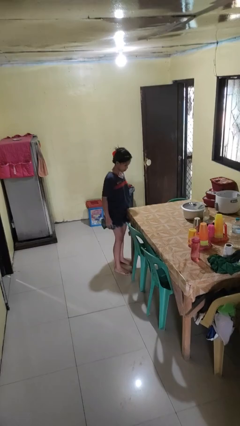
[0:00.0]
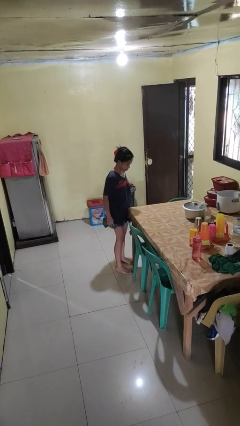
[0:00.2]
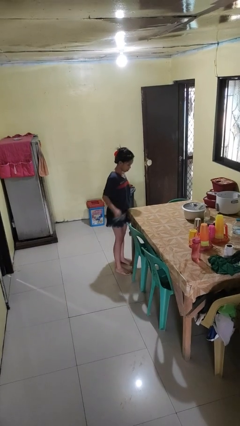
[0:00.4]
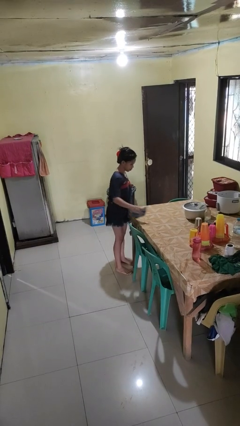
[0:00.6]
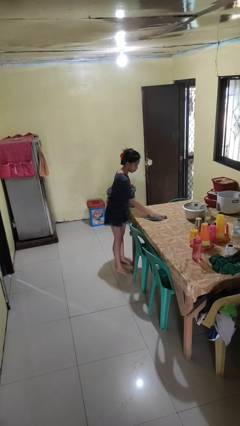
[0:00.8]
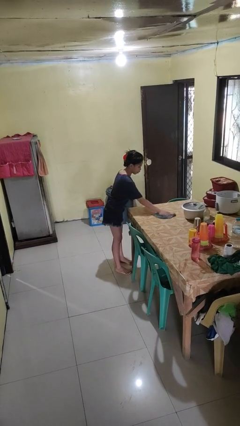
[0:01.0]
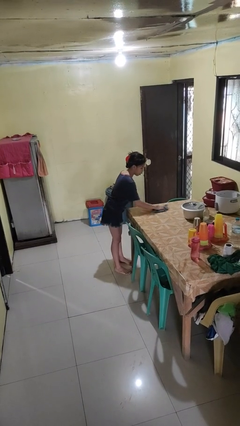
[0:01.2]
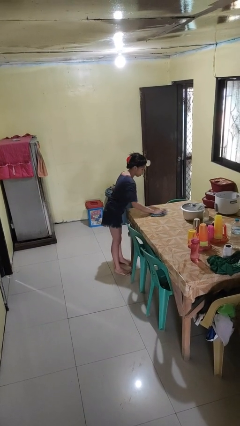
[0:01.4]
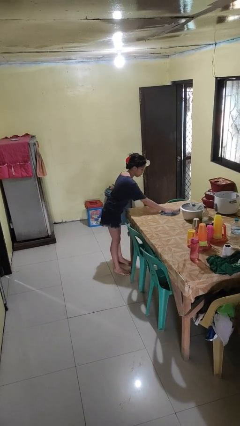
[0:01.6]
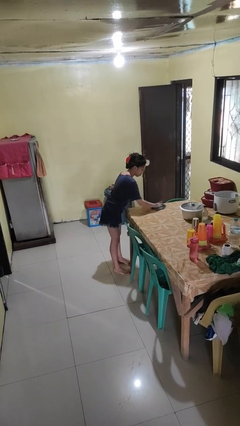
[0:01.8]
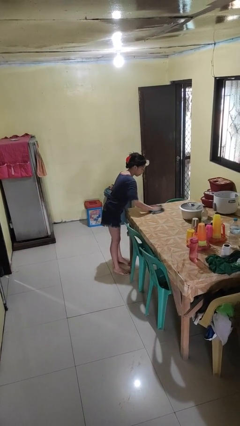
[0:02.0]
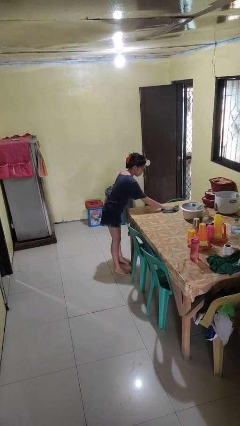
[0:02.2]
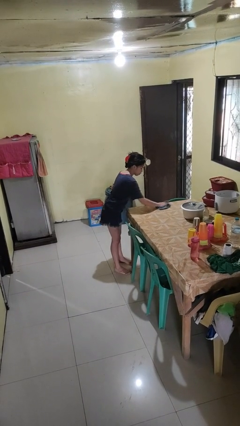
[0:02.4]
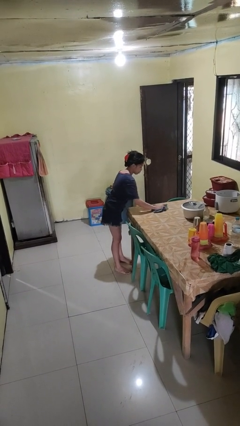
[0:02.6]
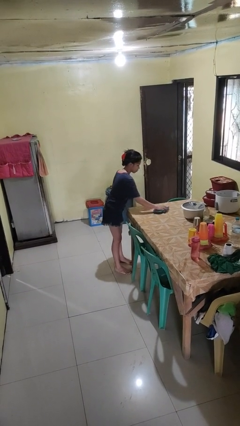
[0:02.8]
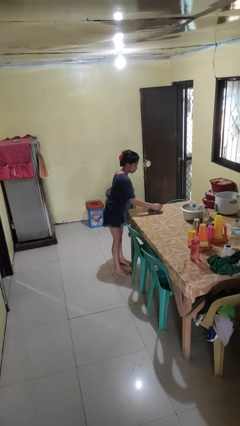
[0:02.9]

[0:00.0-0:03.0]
person cleans table with rag

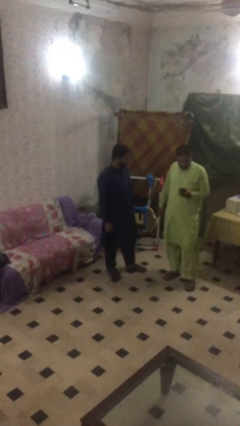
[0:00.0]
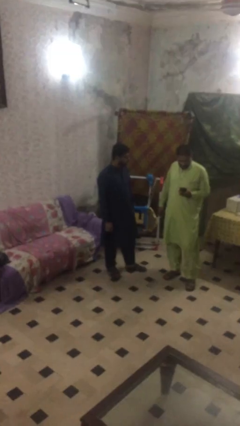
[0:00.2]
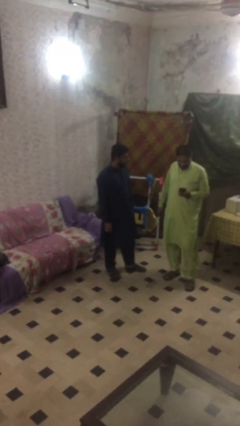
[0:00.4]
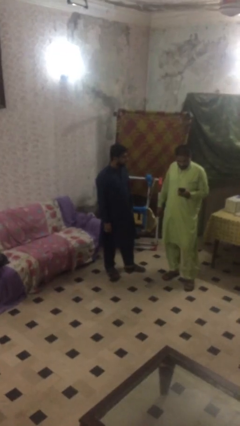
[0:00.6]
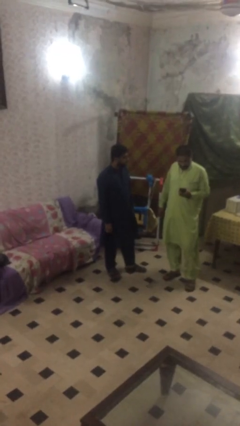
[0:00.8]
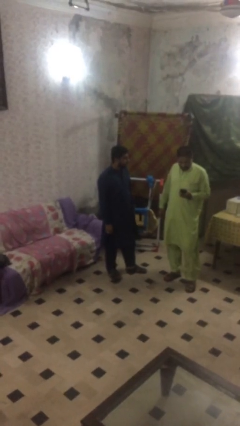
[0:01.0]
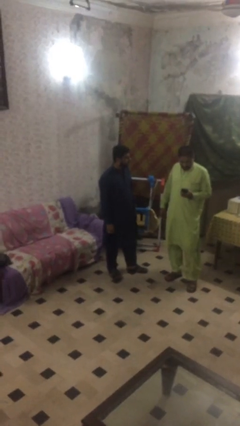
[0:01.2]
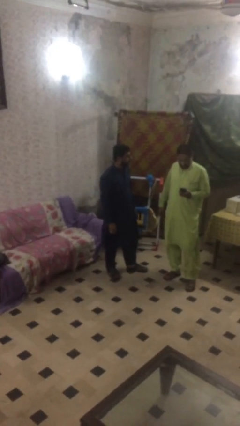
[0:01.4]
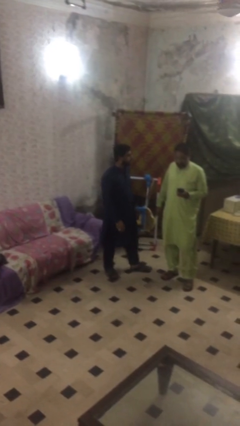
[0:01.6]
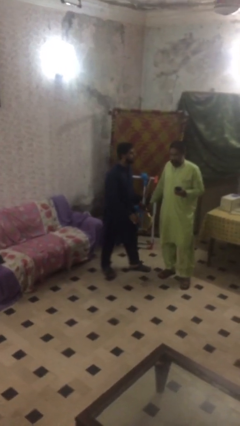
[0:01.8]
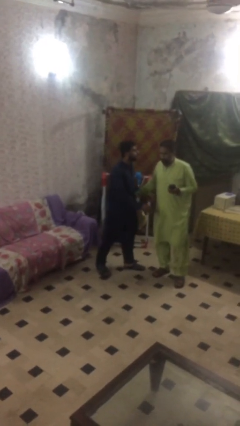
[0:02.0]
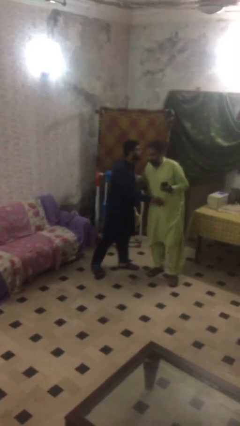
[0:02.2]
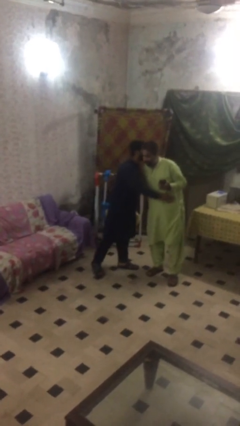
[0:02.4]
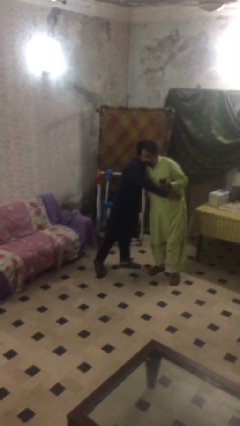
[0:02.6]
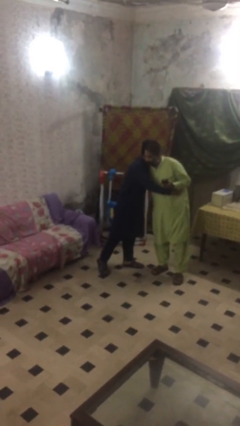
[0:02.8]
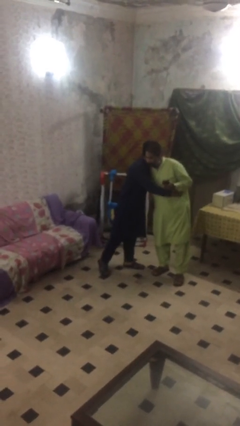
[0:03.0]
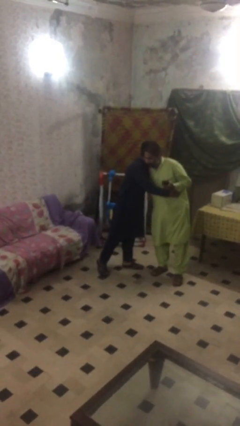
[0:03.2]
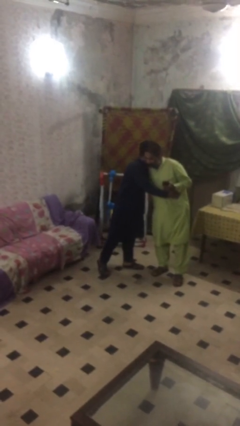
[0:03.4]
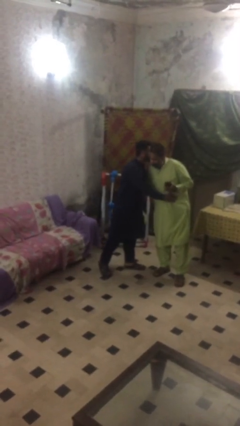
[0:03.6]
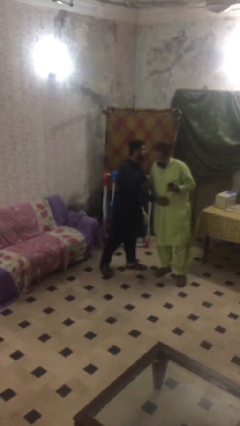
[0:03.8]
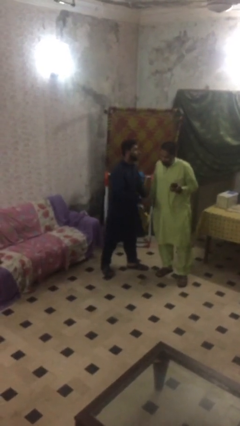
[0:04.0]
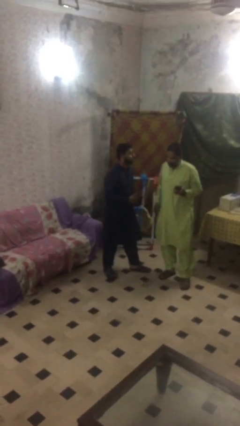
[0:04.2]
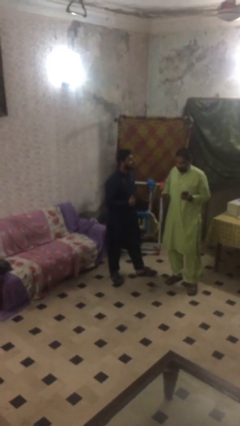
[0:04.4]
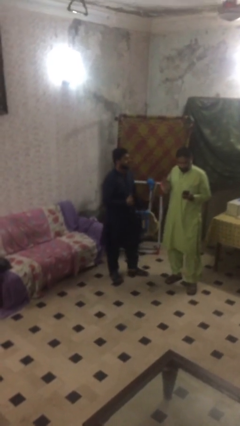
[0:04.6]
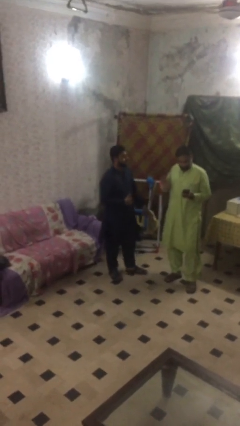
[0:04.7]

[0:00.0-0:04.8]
person embraces person

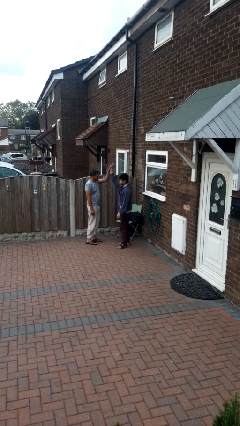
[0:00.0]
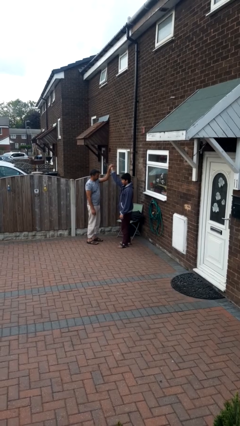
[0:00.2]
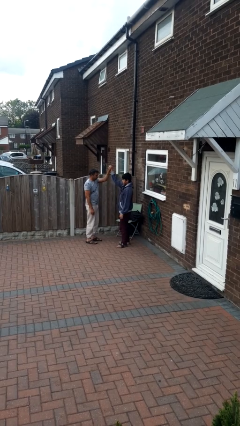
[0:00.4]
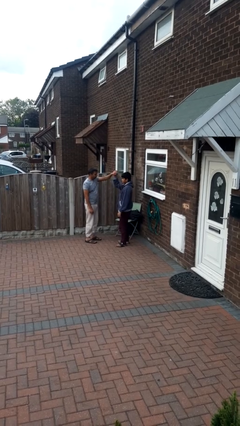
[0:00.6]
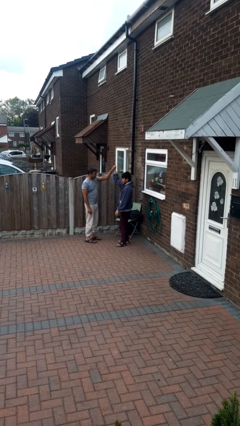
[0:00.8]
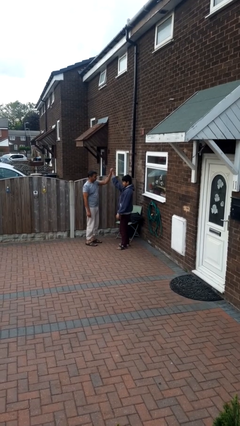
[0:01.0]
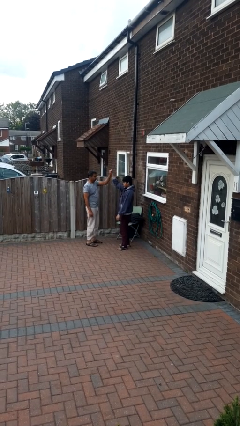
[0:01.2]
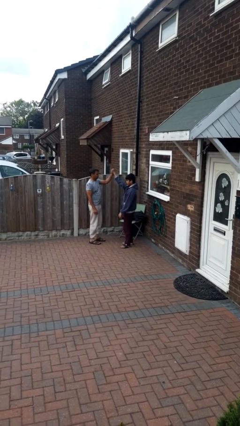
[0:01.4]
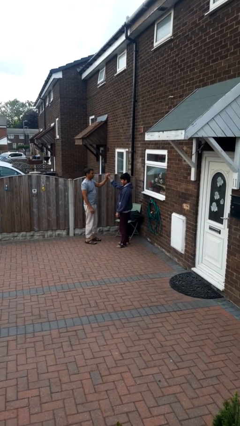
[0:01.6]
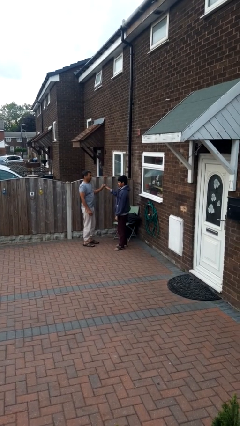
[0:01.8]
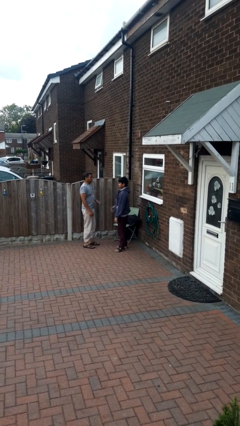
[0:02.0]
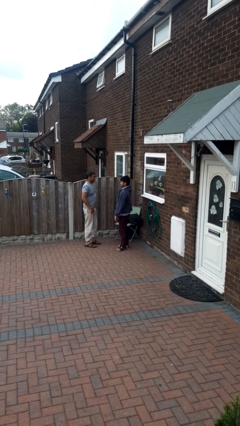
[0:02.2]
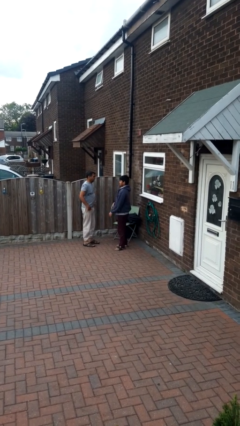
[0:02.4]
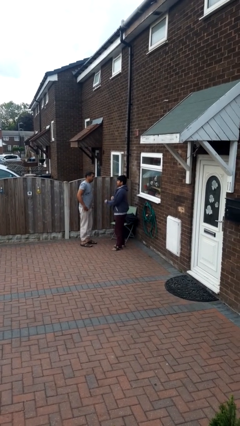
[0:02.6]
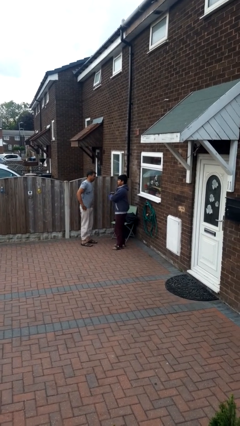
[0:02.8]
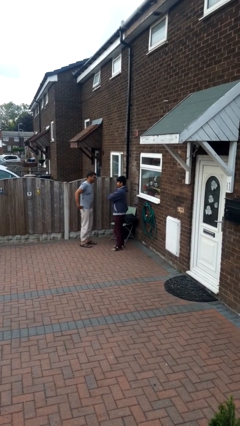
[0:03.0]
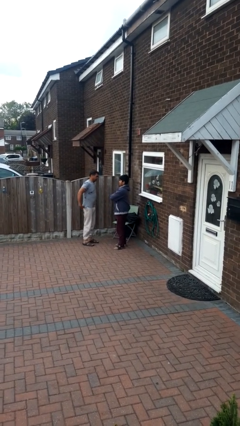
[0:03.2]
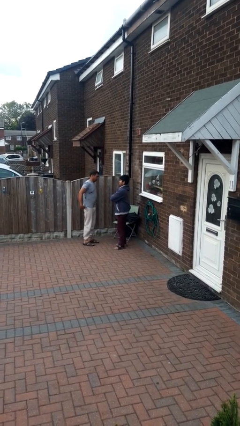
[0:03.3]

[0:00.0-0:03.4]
person highfives hand

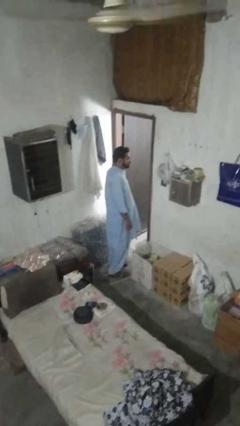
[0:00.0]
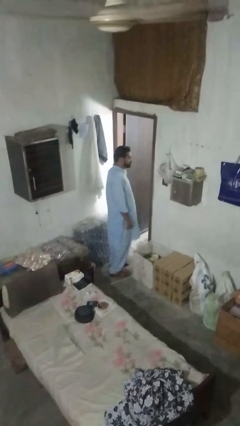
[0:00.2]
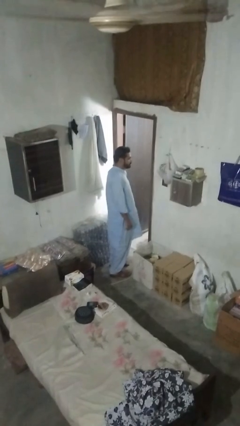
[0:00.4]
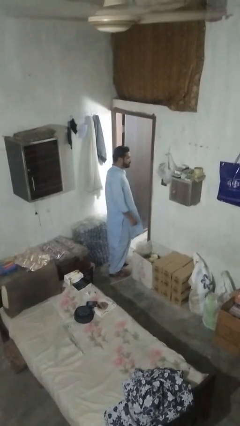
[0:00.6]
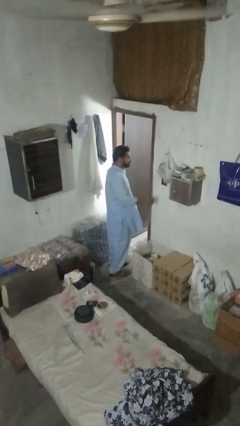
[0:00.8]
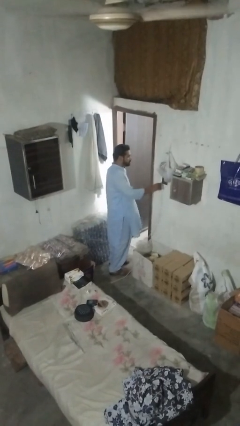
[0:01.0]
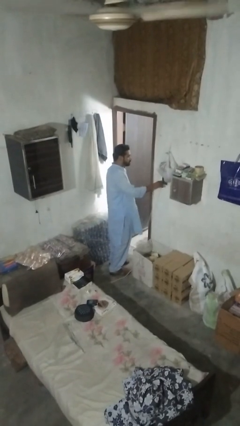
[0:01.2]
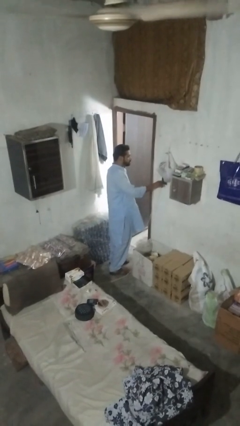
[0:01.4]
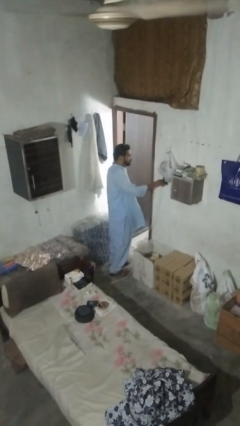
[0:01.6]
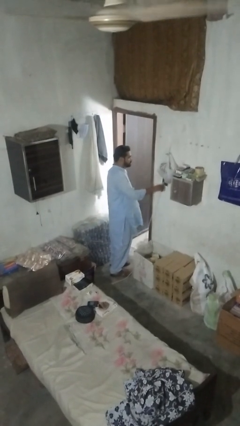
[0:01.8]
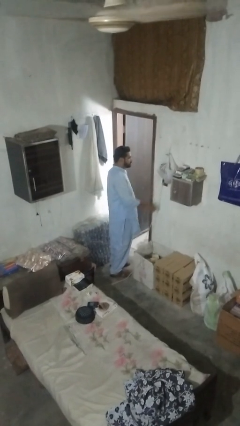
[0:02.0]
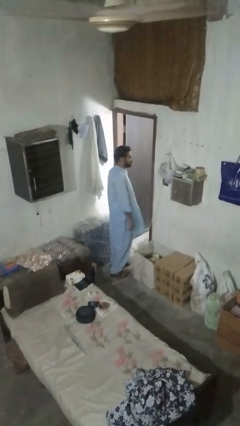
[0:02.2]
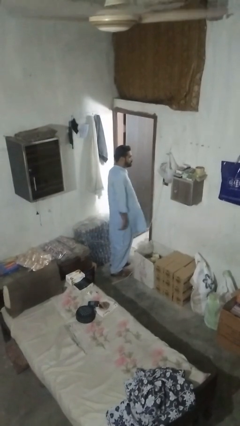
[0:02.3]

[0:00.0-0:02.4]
person plugs into electrical socket

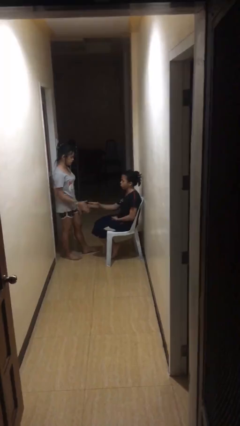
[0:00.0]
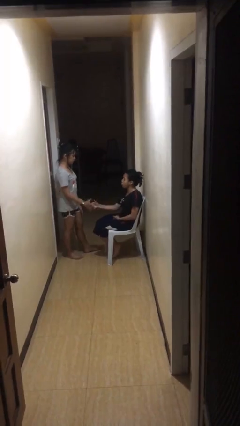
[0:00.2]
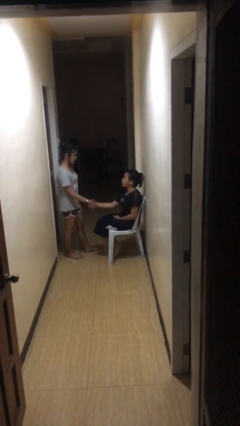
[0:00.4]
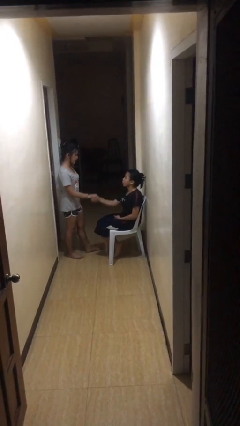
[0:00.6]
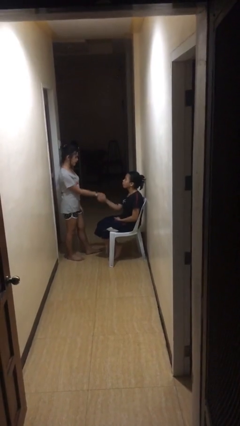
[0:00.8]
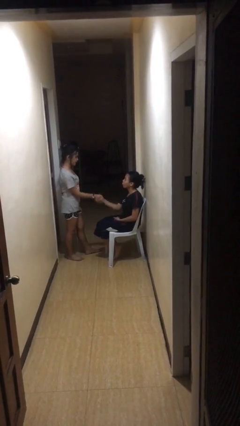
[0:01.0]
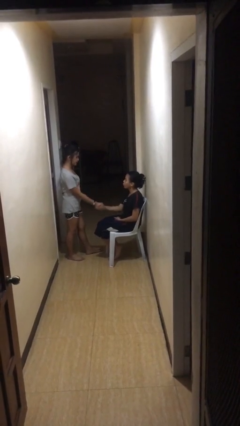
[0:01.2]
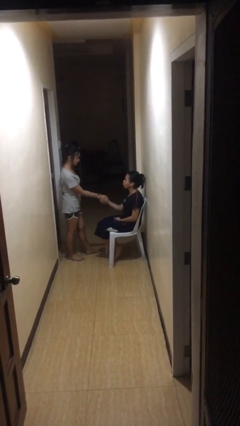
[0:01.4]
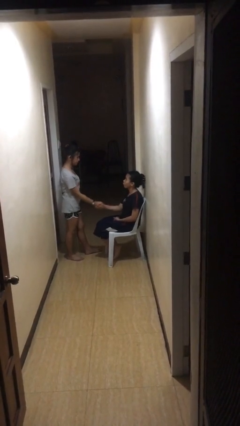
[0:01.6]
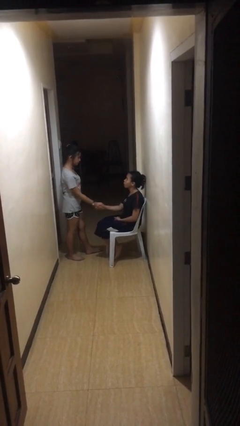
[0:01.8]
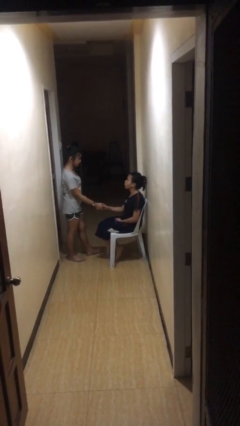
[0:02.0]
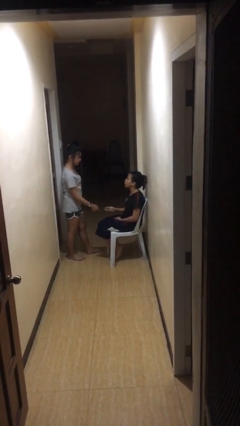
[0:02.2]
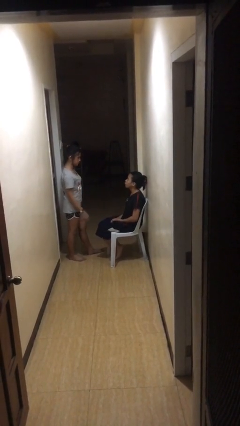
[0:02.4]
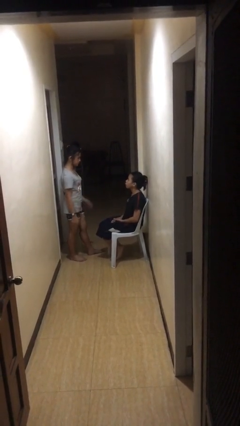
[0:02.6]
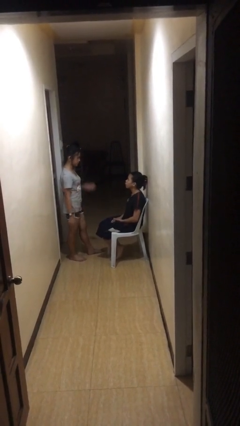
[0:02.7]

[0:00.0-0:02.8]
person shakes hand

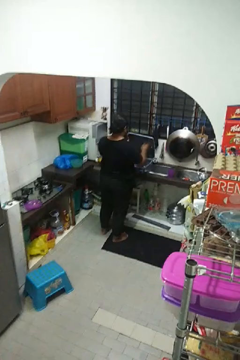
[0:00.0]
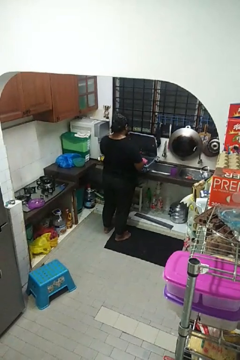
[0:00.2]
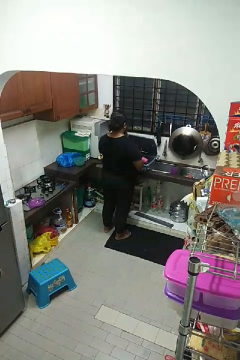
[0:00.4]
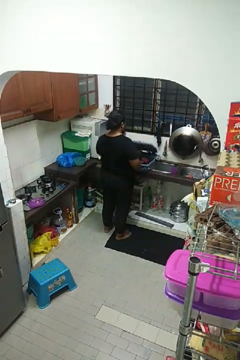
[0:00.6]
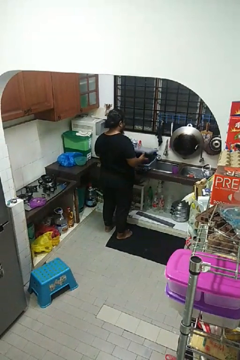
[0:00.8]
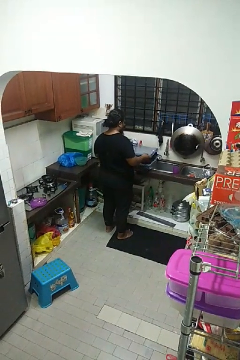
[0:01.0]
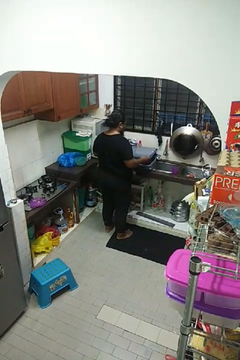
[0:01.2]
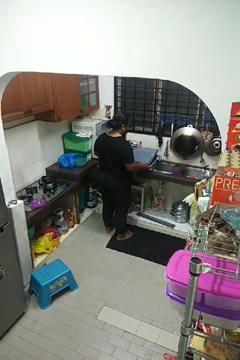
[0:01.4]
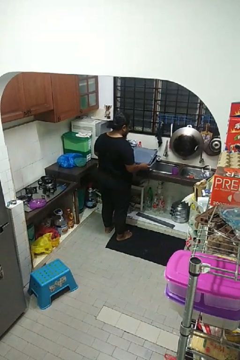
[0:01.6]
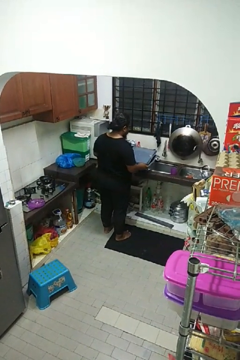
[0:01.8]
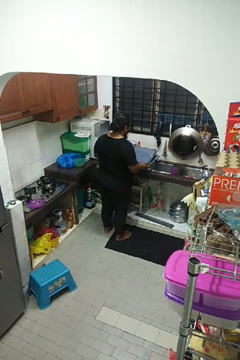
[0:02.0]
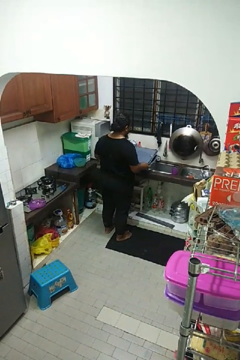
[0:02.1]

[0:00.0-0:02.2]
person closes dishwasher
